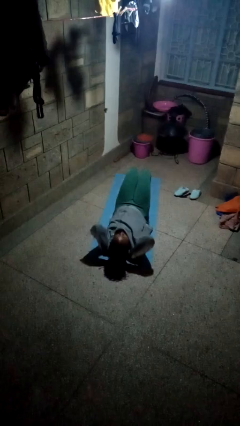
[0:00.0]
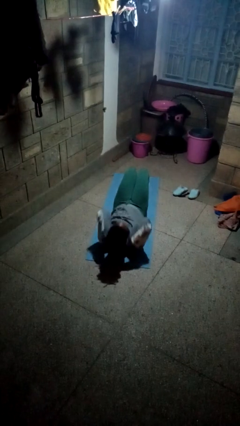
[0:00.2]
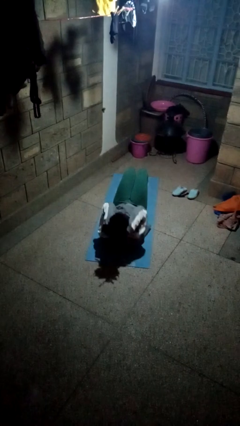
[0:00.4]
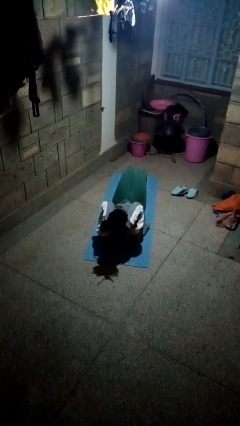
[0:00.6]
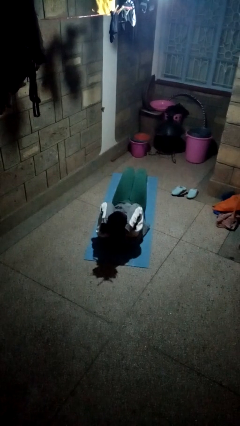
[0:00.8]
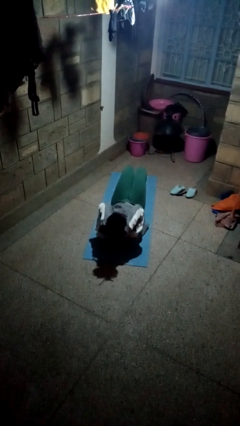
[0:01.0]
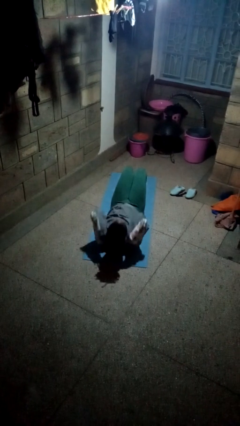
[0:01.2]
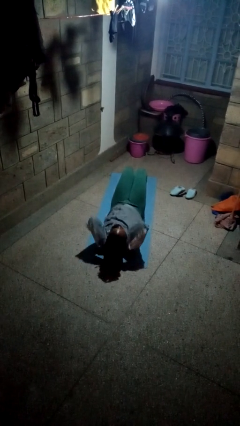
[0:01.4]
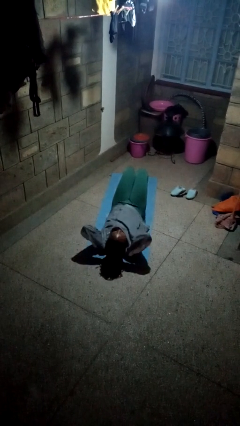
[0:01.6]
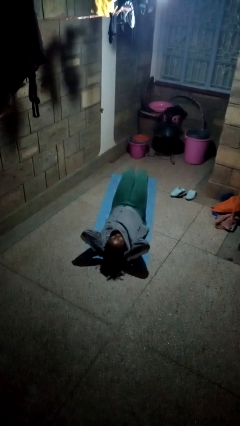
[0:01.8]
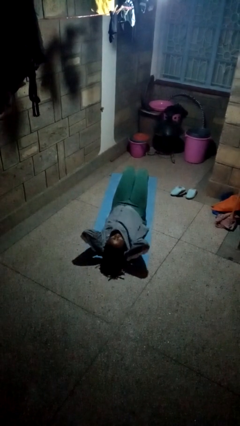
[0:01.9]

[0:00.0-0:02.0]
person exercises with situp

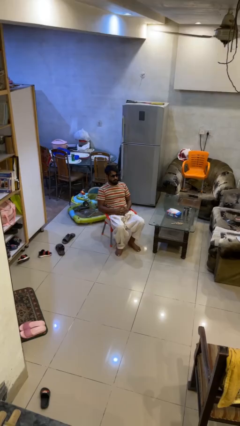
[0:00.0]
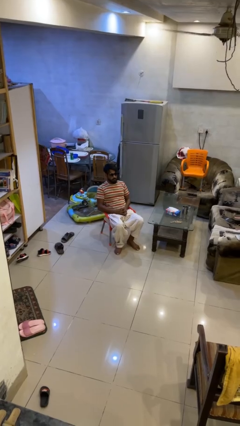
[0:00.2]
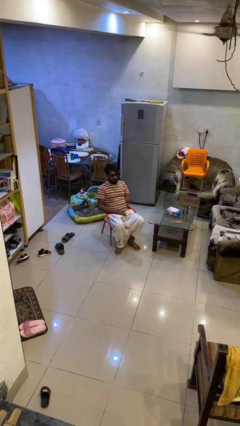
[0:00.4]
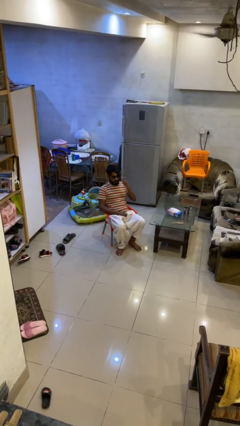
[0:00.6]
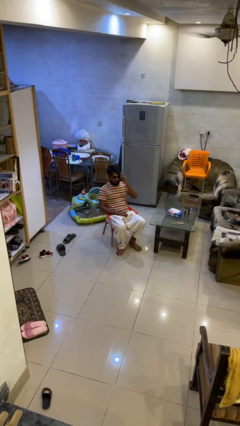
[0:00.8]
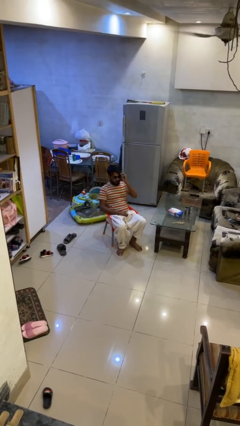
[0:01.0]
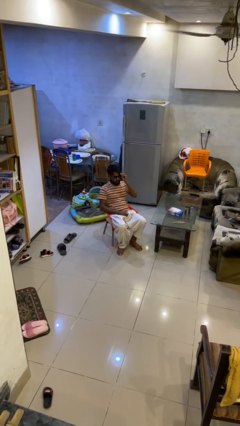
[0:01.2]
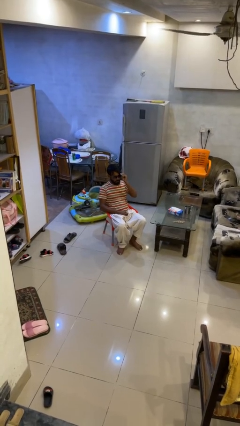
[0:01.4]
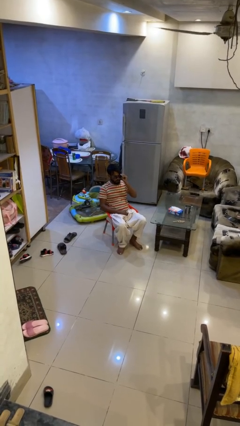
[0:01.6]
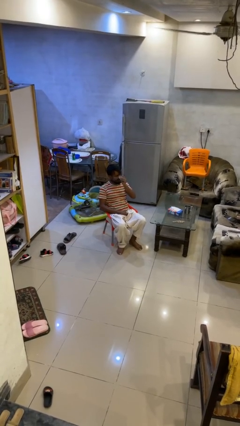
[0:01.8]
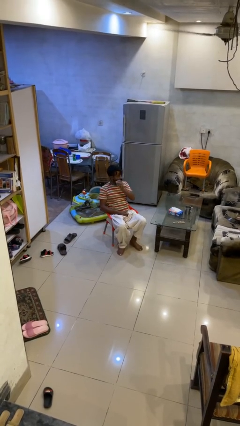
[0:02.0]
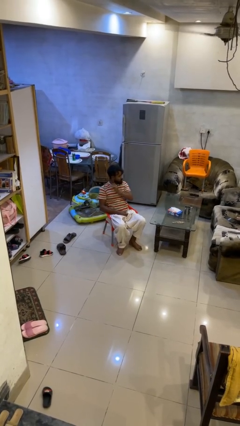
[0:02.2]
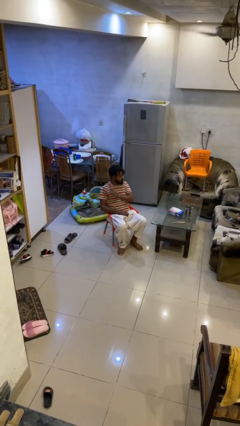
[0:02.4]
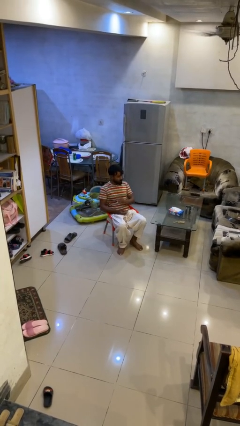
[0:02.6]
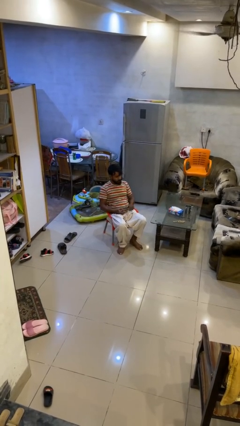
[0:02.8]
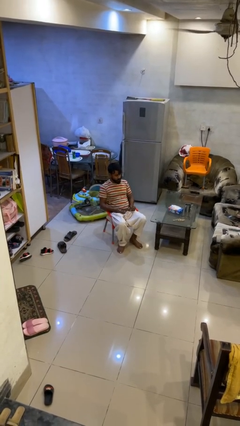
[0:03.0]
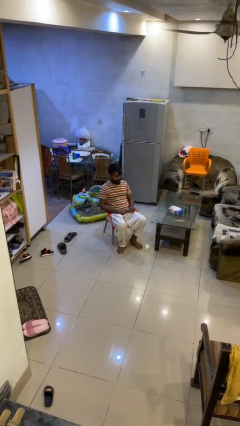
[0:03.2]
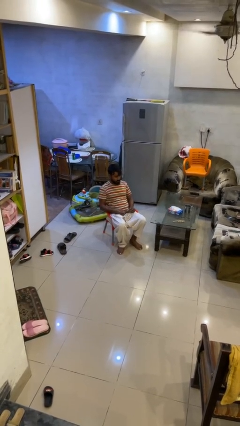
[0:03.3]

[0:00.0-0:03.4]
person takes off sunglasses

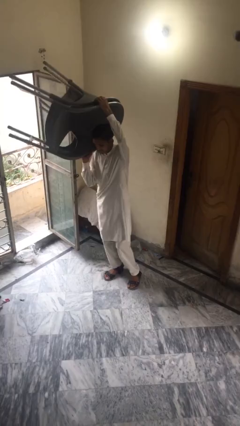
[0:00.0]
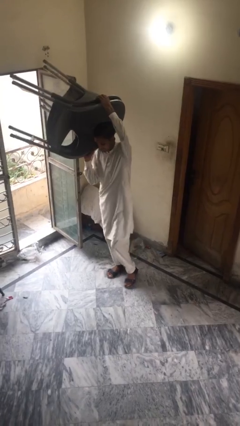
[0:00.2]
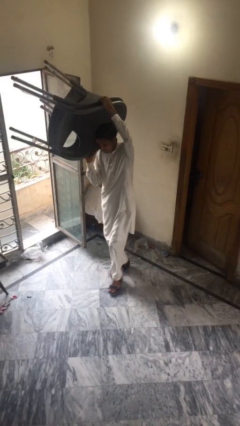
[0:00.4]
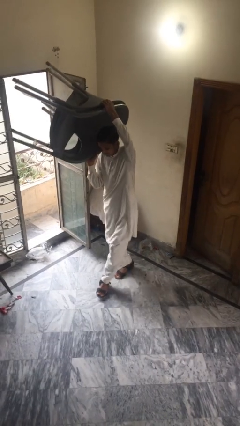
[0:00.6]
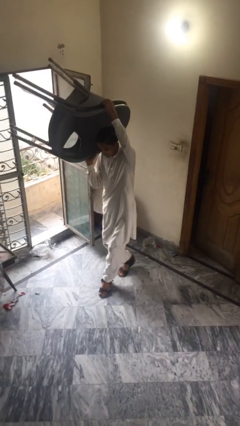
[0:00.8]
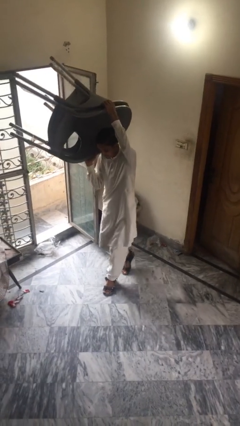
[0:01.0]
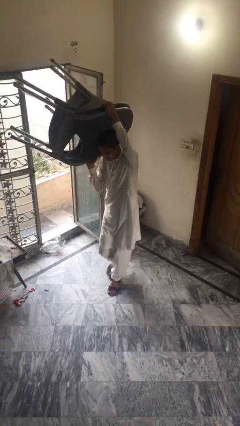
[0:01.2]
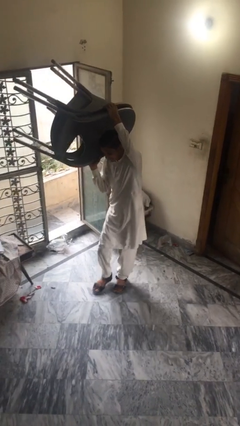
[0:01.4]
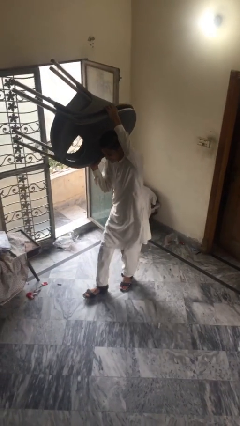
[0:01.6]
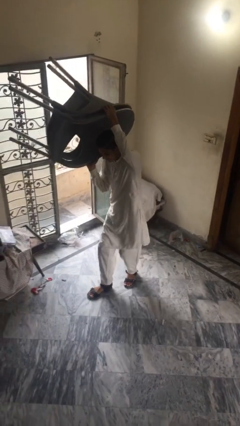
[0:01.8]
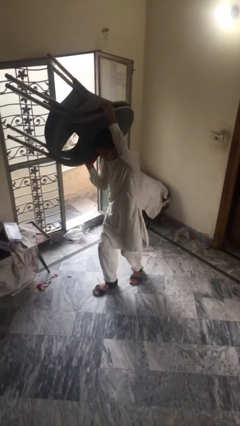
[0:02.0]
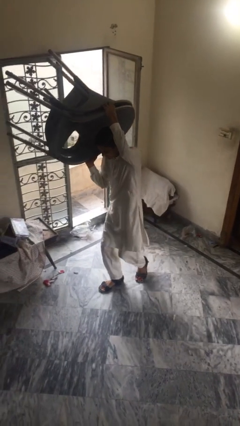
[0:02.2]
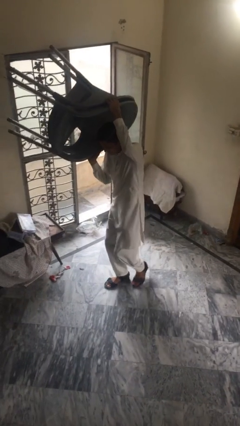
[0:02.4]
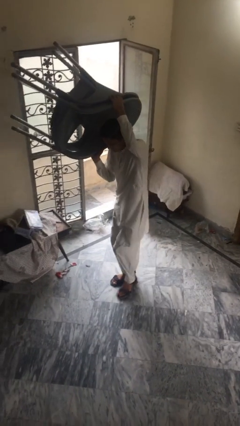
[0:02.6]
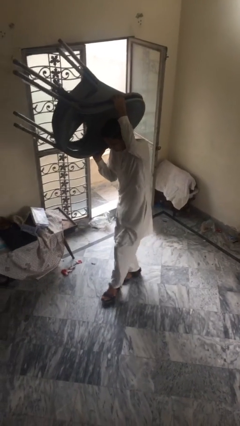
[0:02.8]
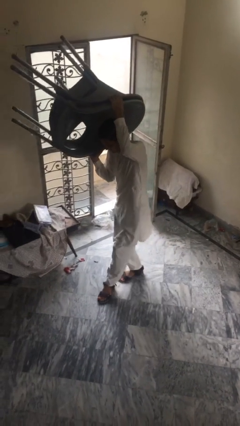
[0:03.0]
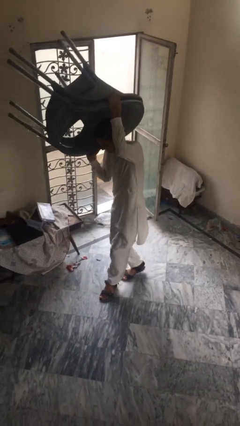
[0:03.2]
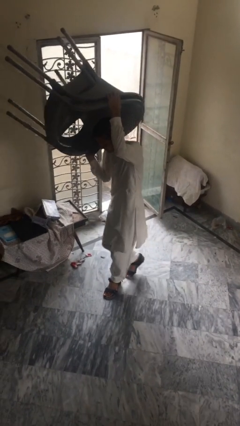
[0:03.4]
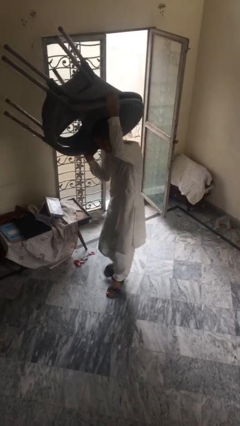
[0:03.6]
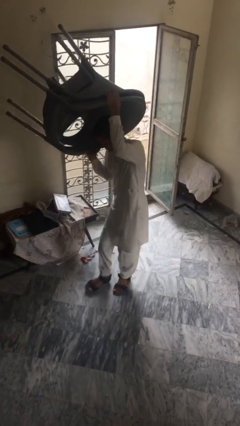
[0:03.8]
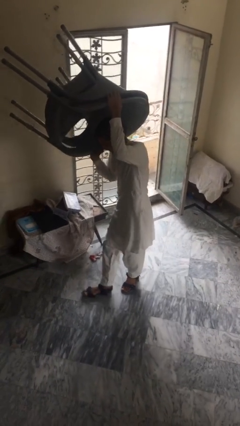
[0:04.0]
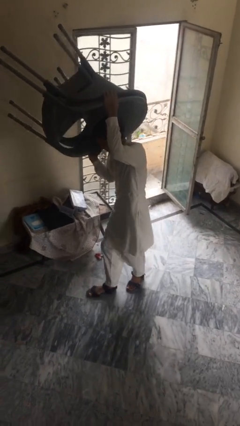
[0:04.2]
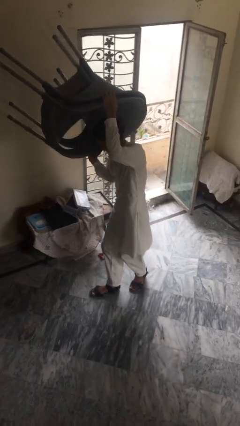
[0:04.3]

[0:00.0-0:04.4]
person carries heavy object

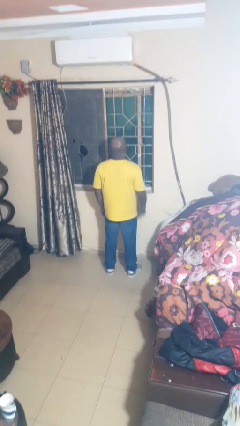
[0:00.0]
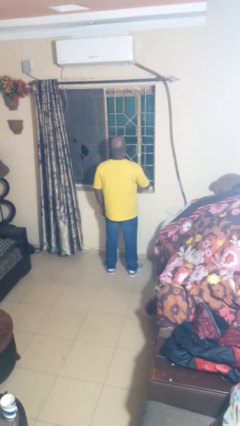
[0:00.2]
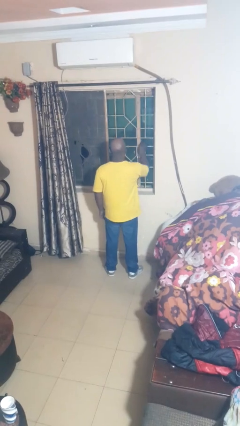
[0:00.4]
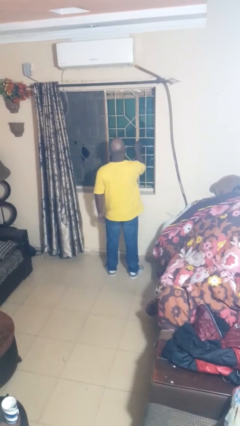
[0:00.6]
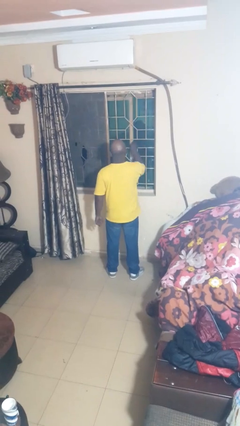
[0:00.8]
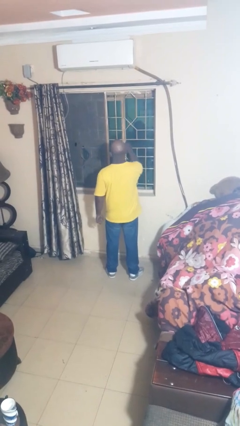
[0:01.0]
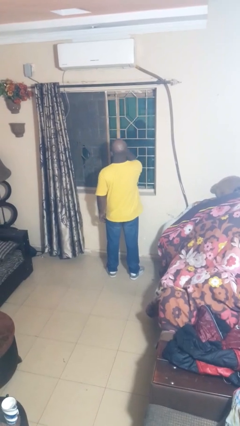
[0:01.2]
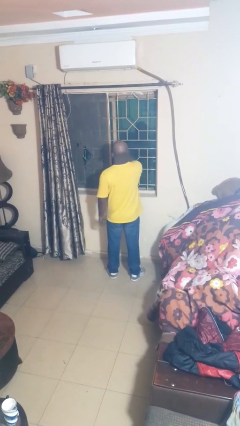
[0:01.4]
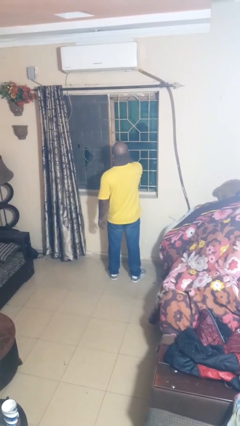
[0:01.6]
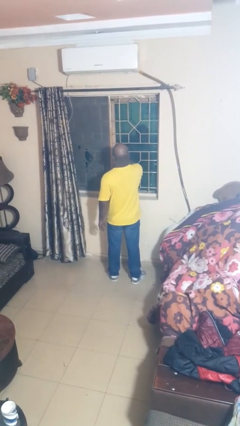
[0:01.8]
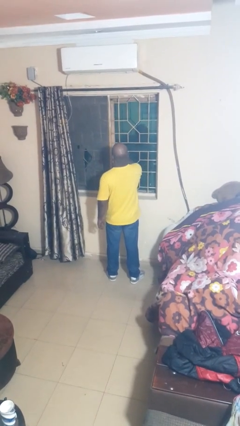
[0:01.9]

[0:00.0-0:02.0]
person opens home window

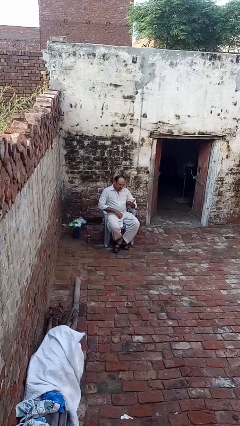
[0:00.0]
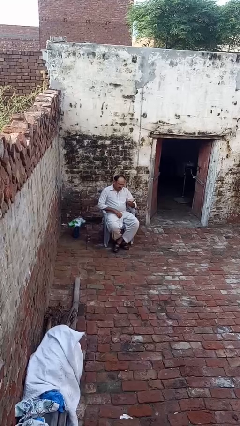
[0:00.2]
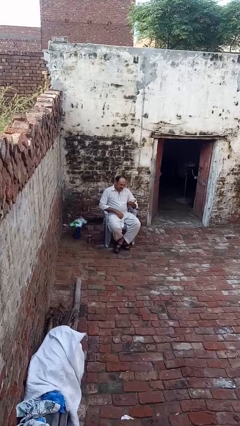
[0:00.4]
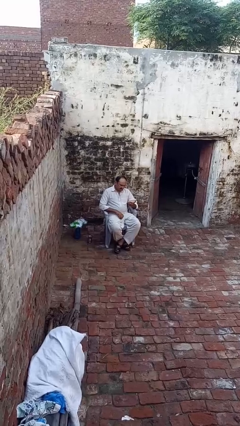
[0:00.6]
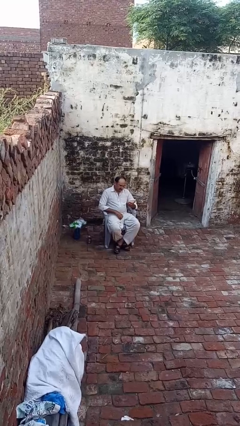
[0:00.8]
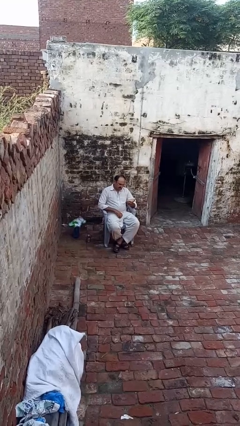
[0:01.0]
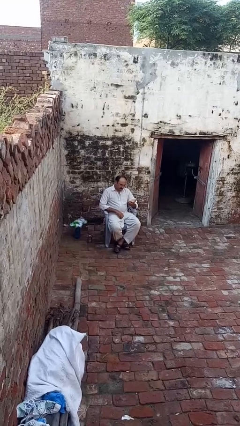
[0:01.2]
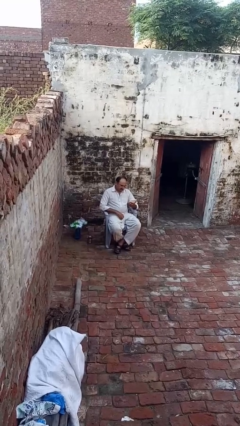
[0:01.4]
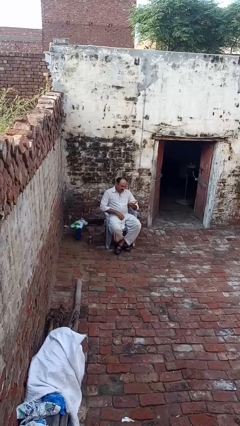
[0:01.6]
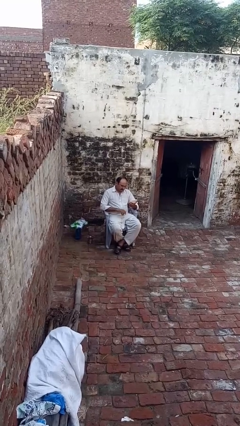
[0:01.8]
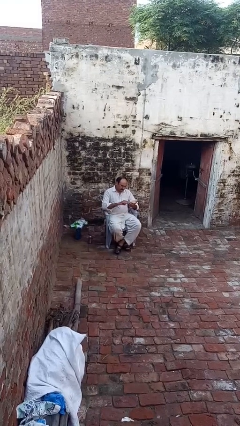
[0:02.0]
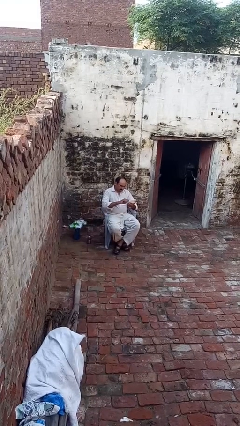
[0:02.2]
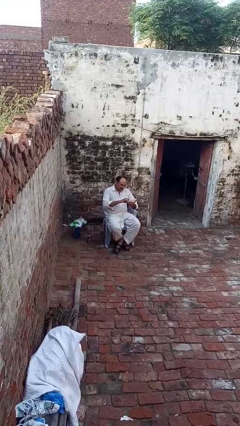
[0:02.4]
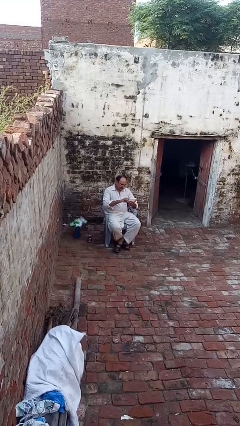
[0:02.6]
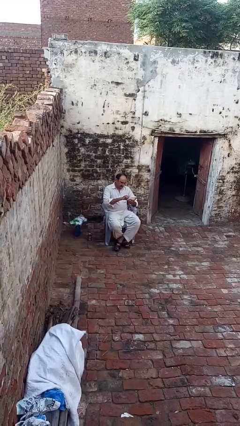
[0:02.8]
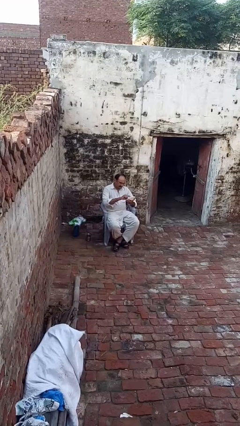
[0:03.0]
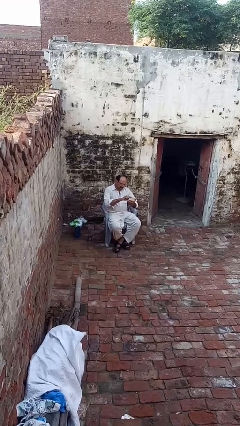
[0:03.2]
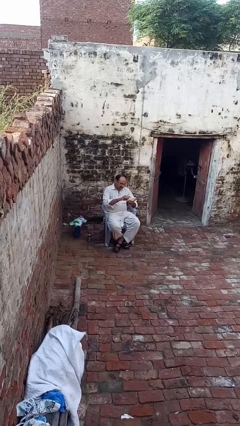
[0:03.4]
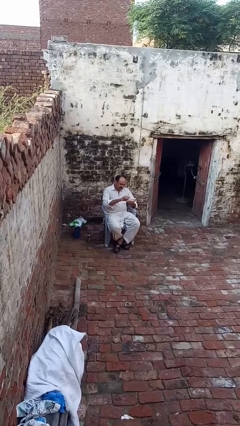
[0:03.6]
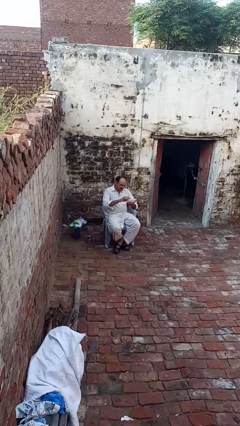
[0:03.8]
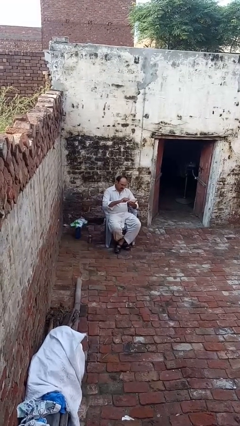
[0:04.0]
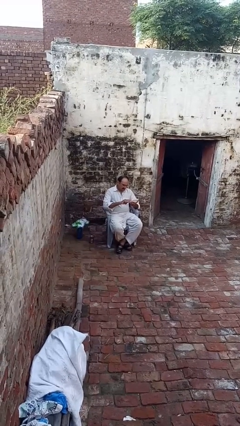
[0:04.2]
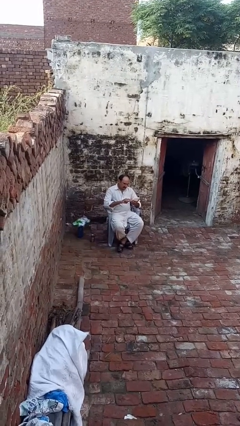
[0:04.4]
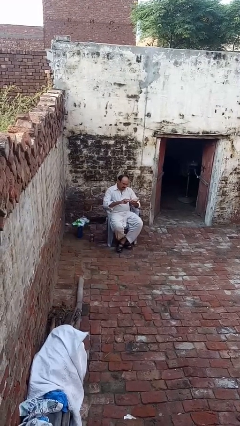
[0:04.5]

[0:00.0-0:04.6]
person interacts with tablet

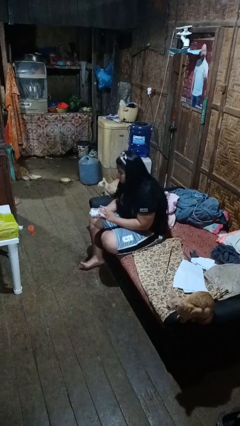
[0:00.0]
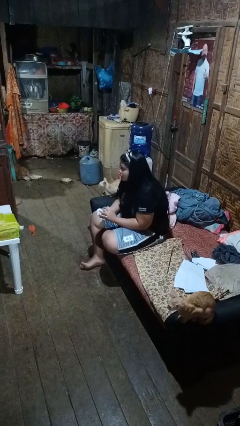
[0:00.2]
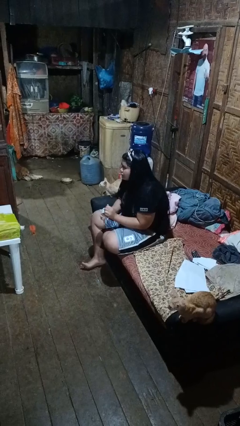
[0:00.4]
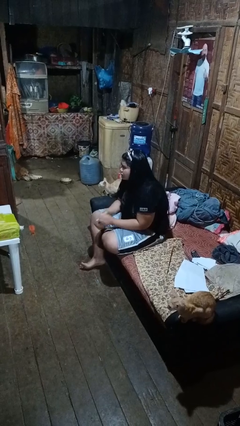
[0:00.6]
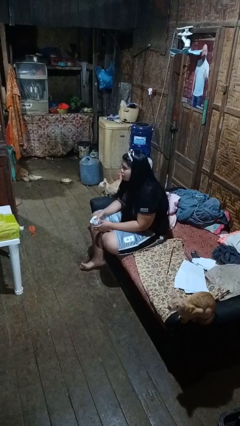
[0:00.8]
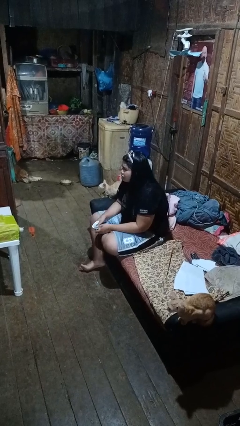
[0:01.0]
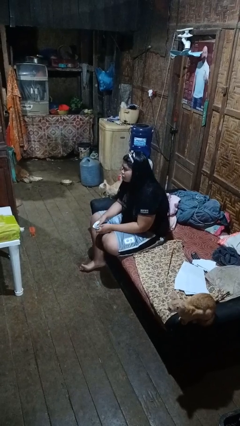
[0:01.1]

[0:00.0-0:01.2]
person crumples paper
